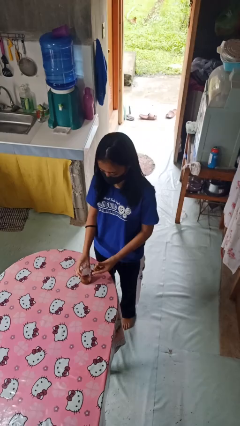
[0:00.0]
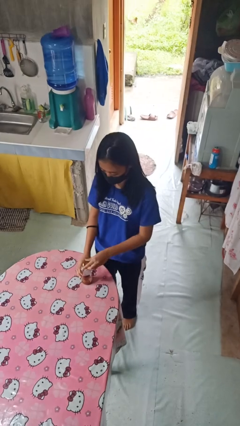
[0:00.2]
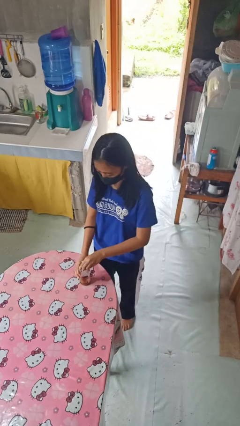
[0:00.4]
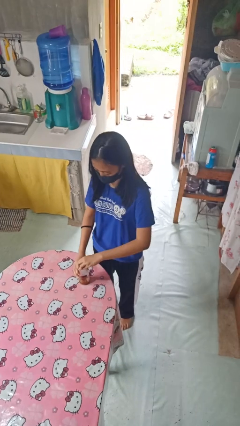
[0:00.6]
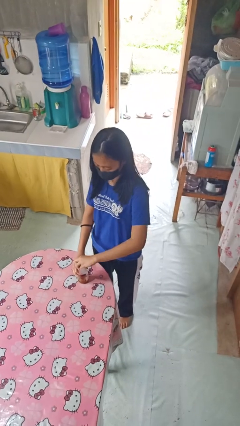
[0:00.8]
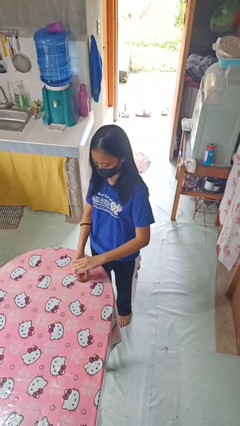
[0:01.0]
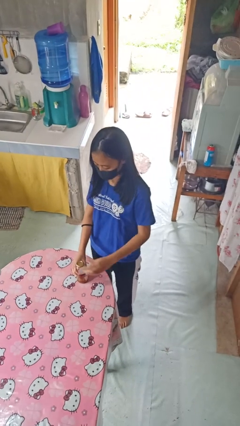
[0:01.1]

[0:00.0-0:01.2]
person closes jar

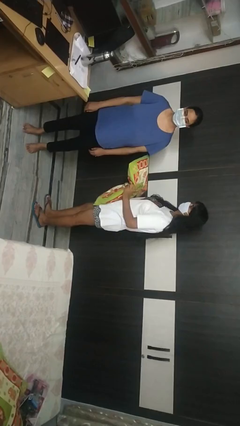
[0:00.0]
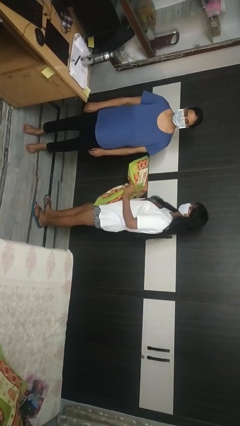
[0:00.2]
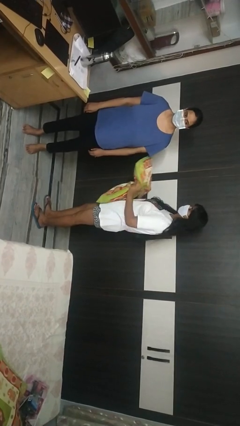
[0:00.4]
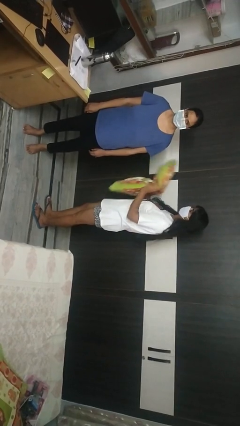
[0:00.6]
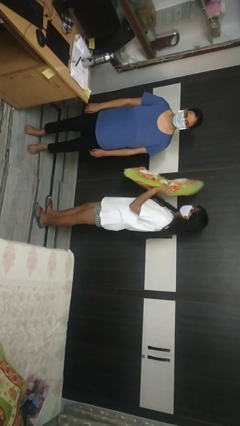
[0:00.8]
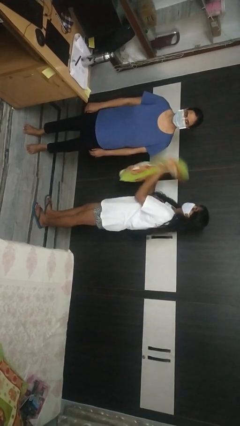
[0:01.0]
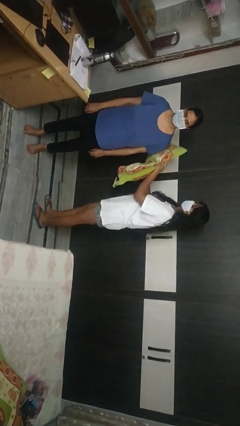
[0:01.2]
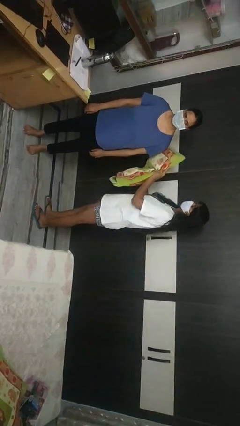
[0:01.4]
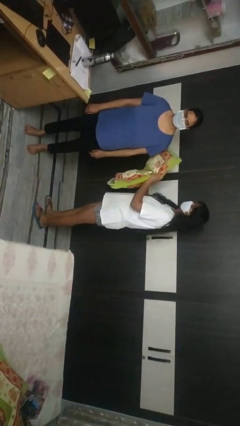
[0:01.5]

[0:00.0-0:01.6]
person hits person with pillow

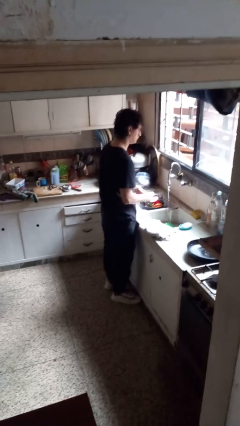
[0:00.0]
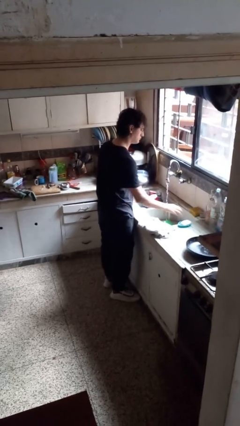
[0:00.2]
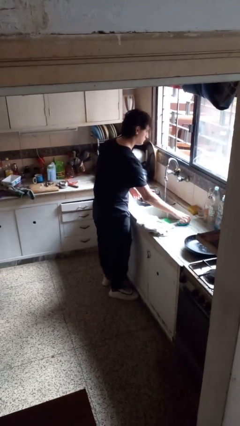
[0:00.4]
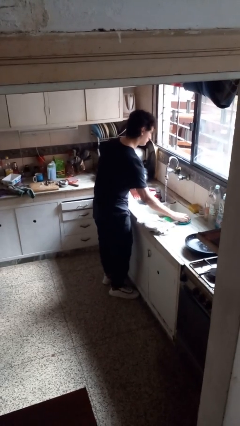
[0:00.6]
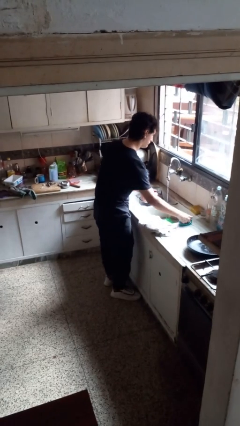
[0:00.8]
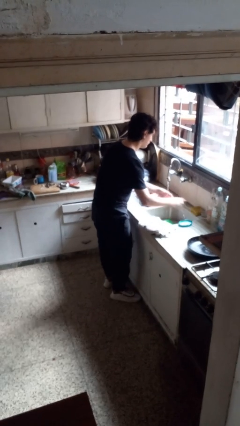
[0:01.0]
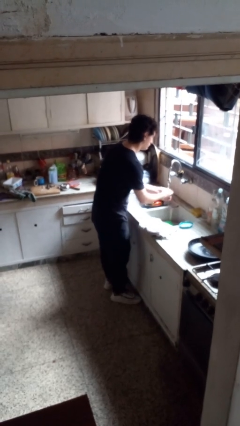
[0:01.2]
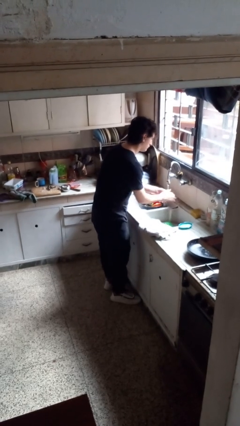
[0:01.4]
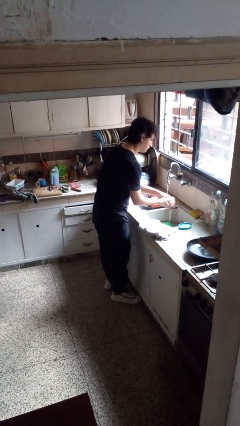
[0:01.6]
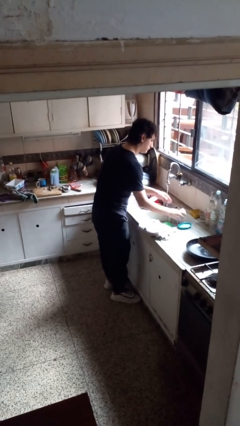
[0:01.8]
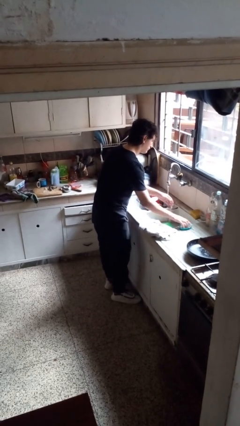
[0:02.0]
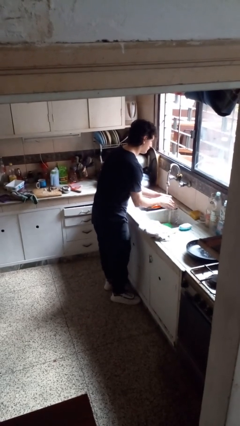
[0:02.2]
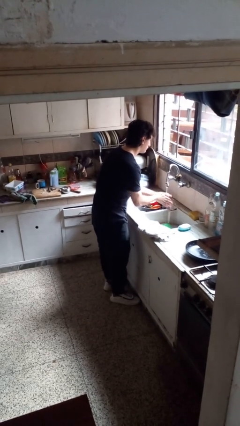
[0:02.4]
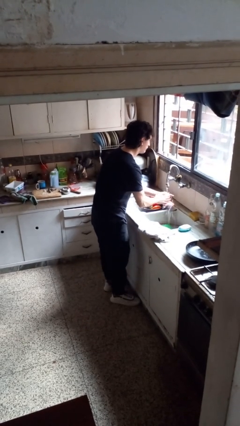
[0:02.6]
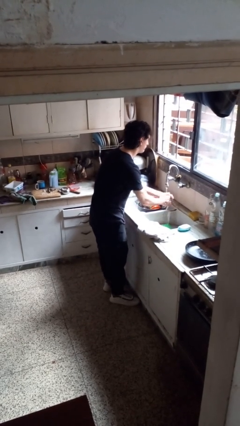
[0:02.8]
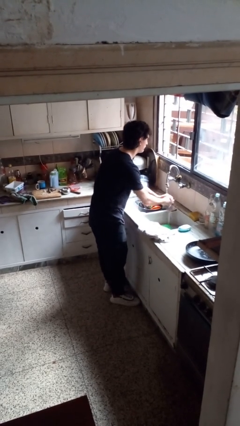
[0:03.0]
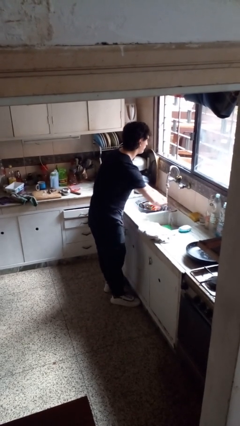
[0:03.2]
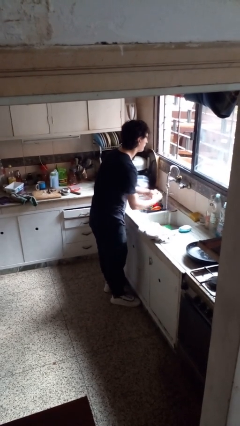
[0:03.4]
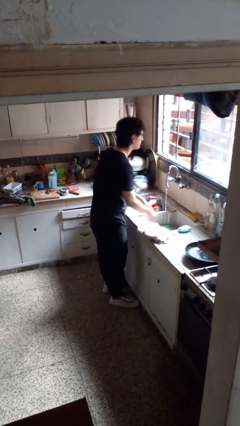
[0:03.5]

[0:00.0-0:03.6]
person washes hands

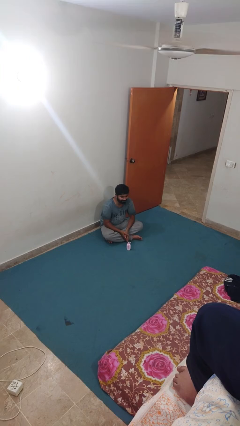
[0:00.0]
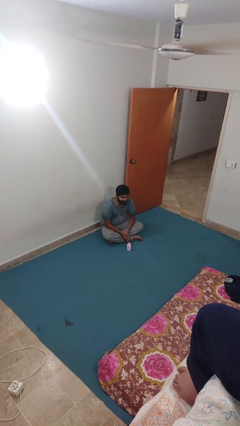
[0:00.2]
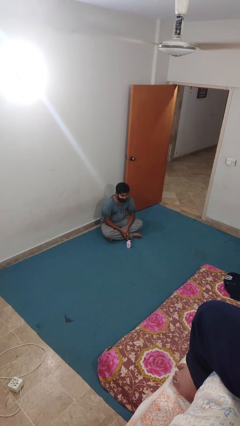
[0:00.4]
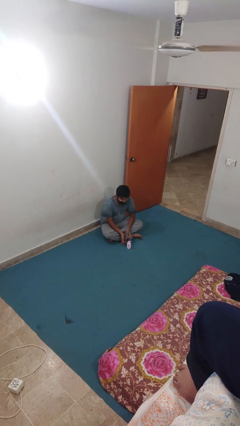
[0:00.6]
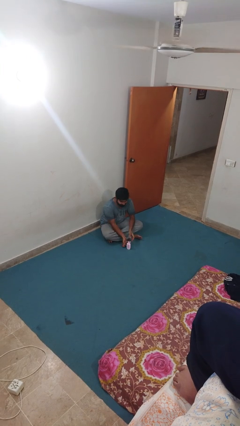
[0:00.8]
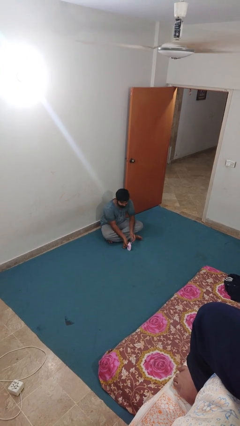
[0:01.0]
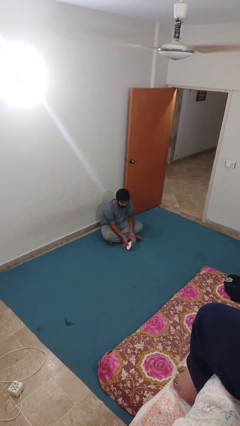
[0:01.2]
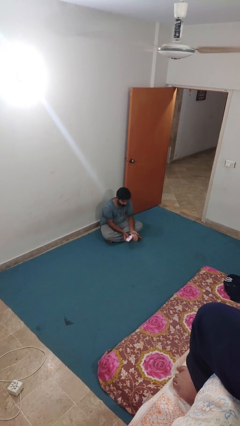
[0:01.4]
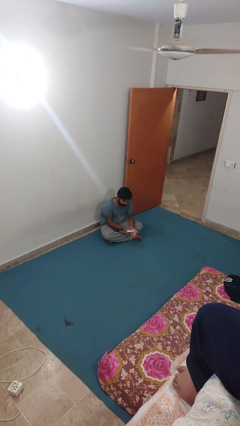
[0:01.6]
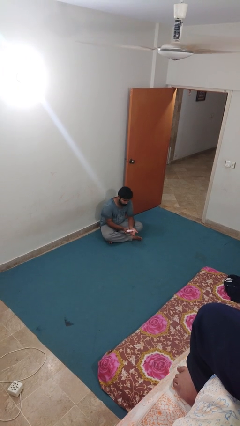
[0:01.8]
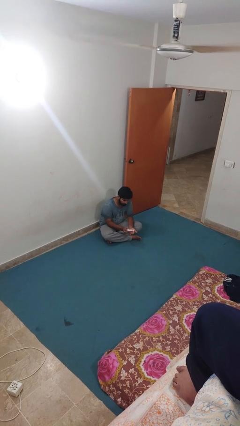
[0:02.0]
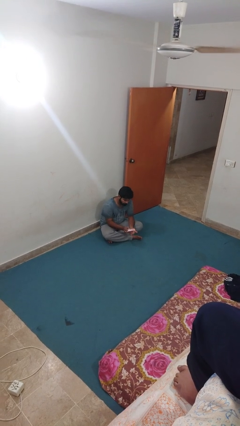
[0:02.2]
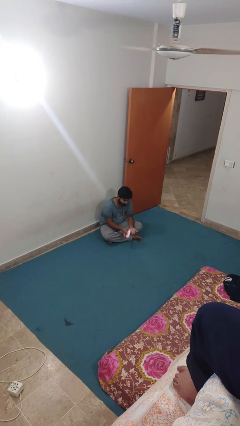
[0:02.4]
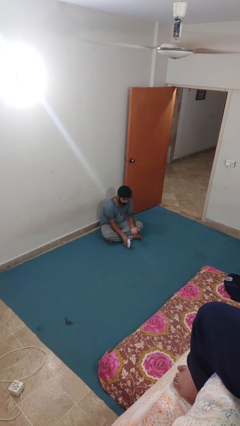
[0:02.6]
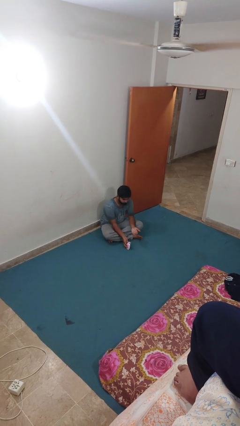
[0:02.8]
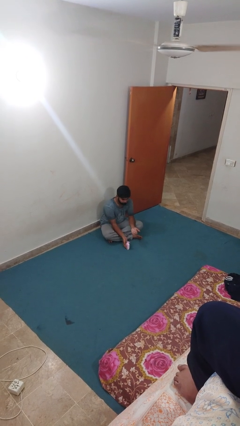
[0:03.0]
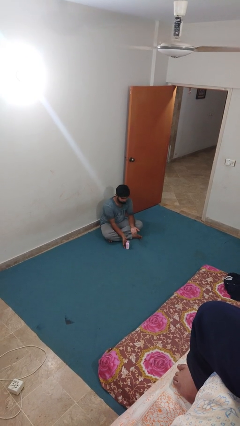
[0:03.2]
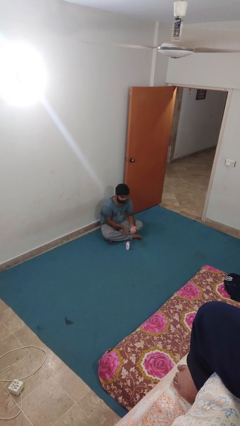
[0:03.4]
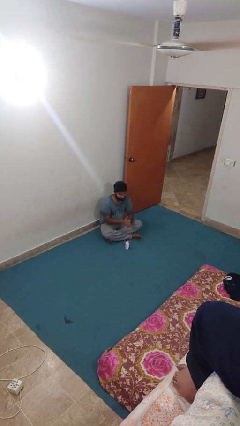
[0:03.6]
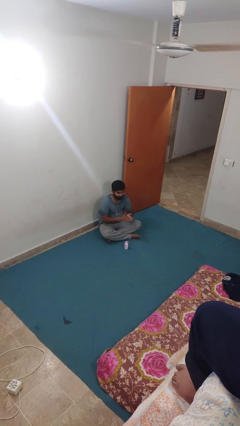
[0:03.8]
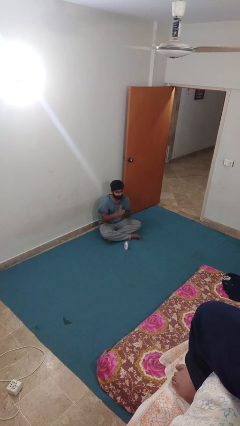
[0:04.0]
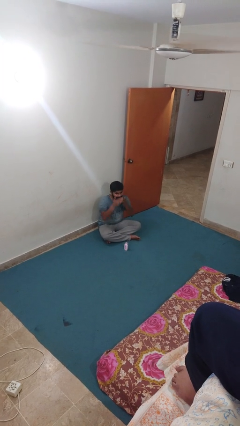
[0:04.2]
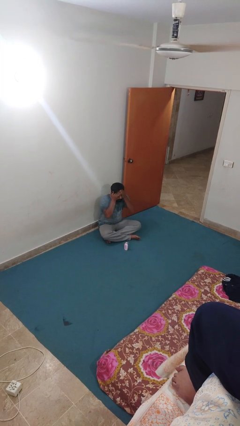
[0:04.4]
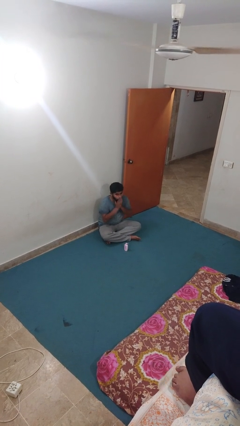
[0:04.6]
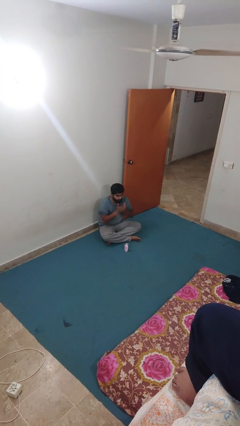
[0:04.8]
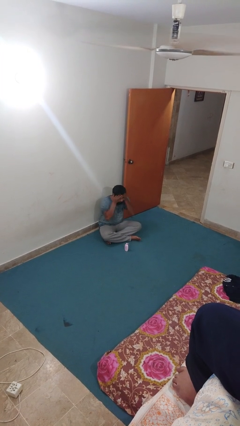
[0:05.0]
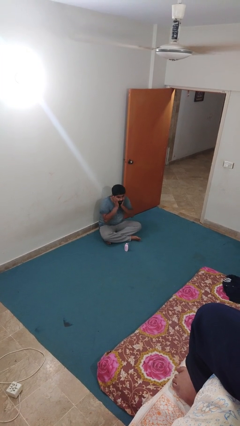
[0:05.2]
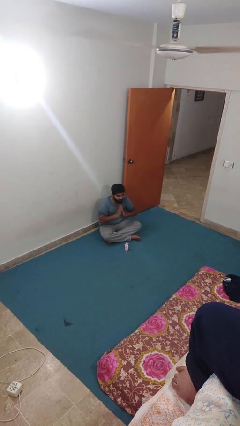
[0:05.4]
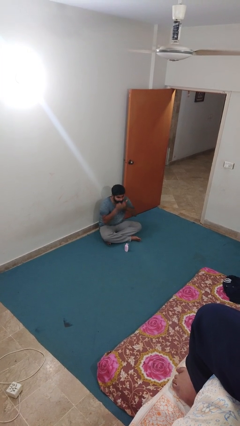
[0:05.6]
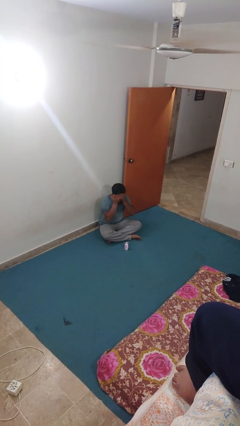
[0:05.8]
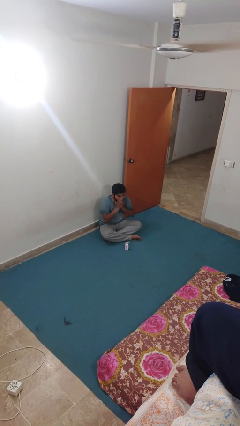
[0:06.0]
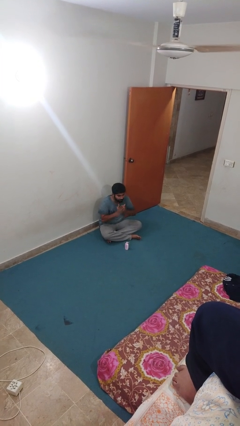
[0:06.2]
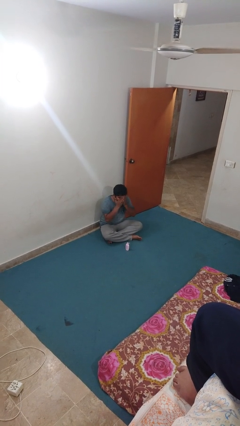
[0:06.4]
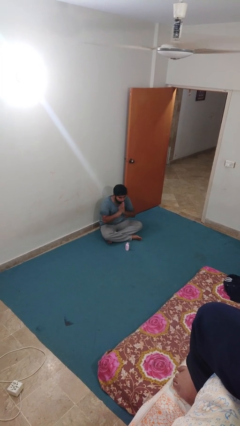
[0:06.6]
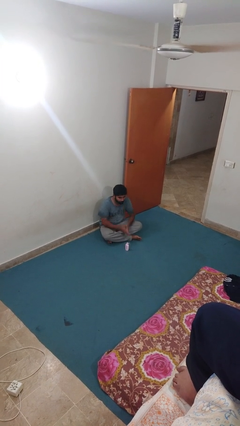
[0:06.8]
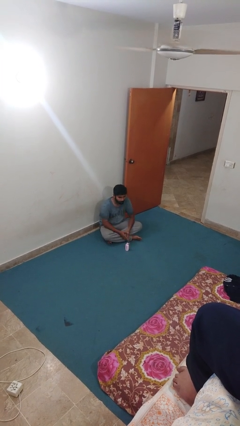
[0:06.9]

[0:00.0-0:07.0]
person applies facial moisturizer

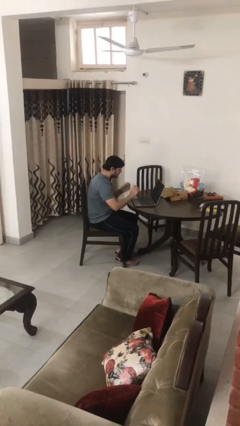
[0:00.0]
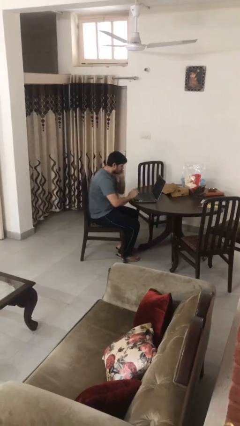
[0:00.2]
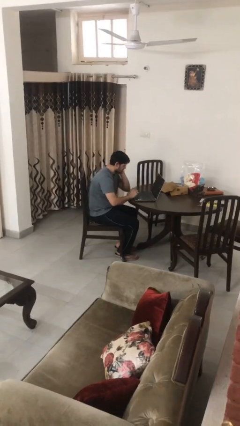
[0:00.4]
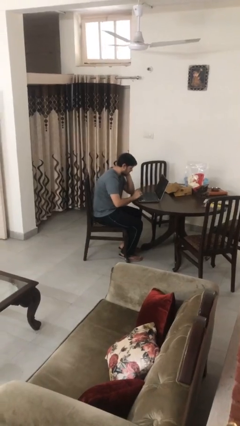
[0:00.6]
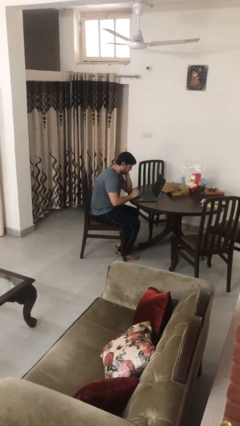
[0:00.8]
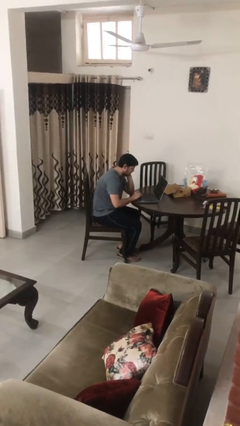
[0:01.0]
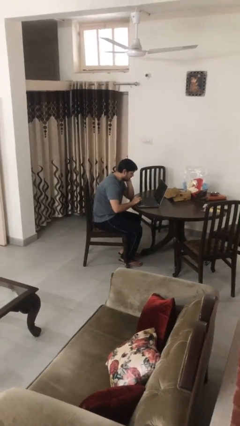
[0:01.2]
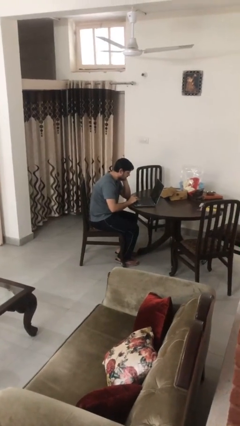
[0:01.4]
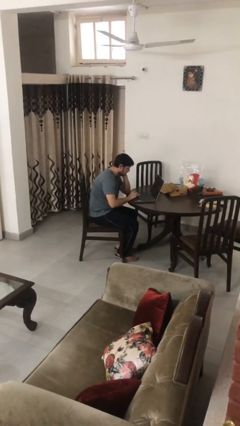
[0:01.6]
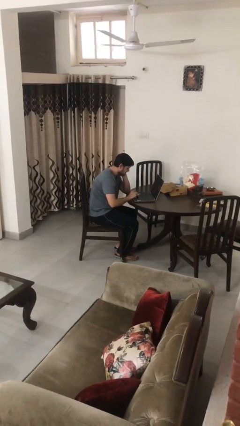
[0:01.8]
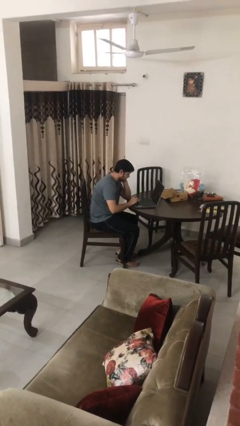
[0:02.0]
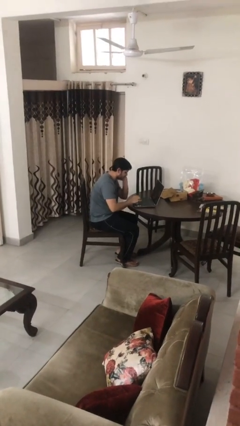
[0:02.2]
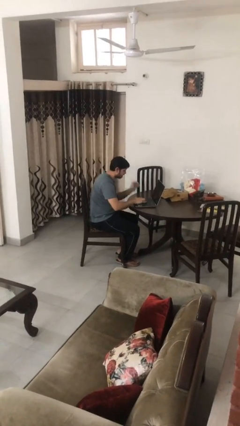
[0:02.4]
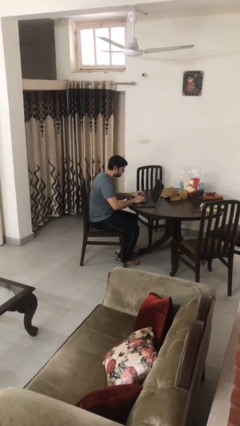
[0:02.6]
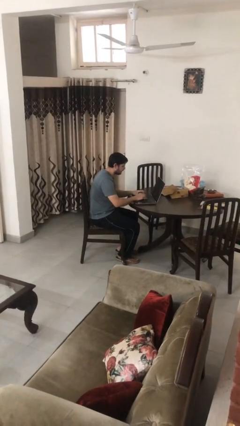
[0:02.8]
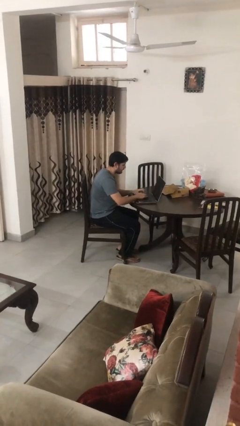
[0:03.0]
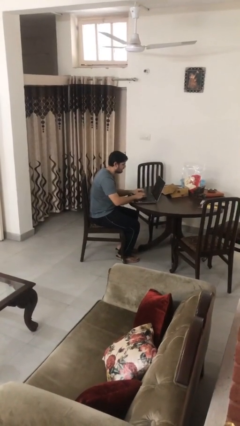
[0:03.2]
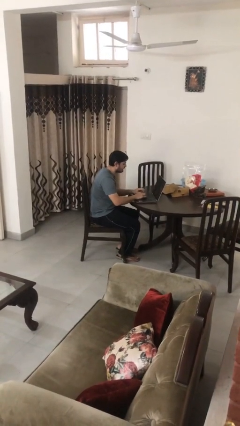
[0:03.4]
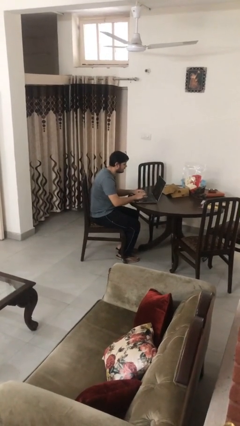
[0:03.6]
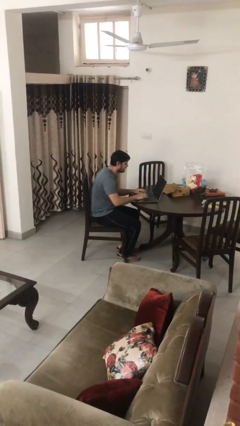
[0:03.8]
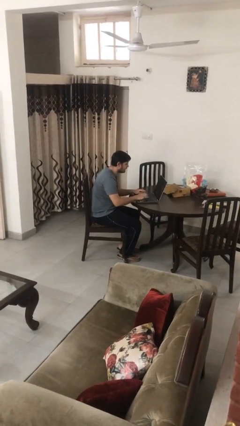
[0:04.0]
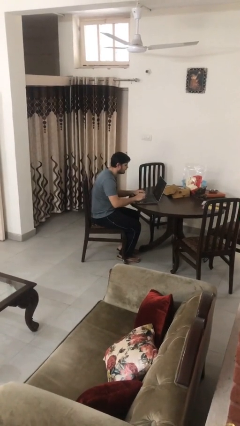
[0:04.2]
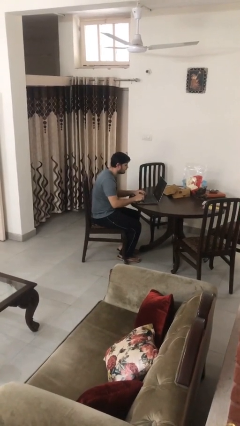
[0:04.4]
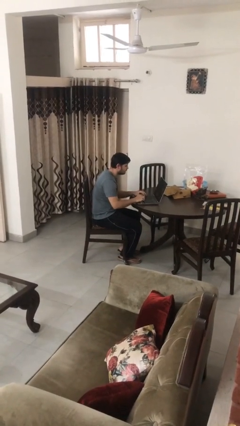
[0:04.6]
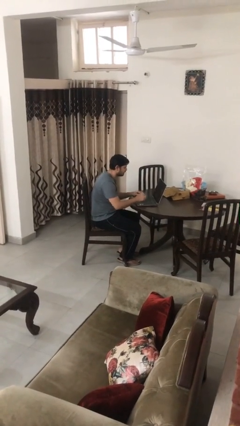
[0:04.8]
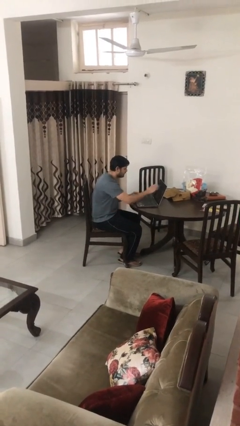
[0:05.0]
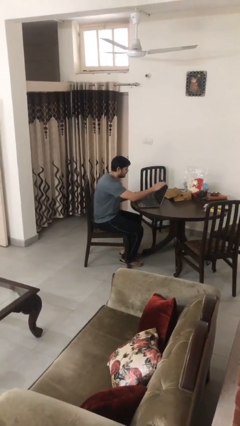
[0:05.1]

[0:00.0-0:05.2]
person interacts with laptop
